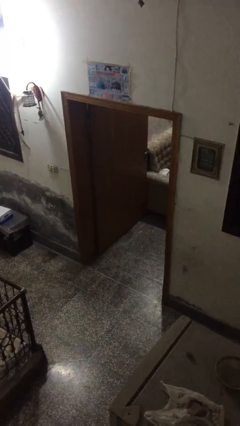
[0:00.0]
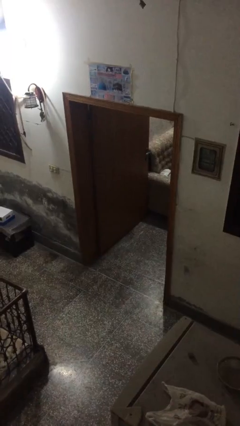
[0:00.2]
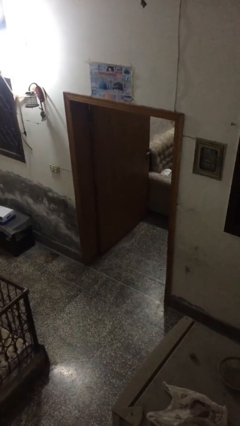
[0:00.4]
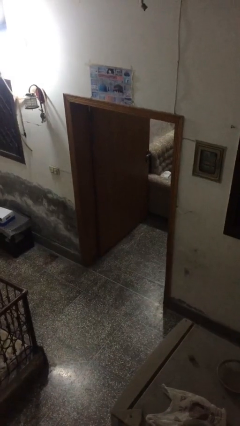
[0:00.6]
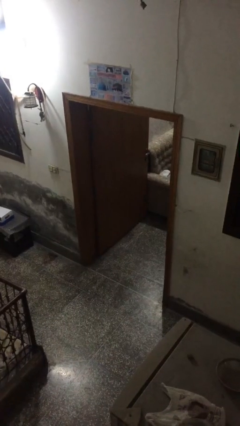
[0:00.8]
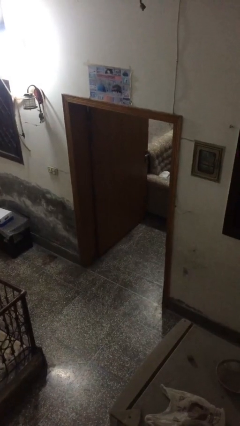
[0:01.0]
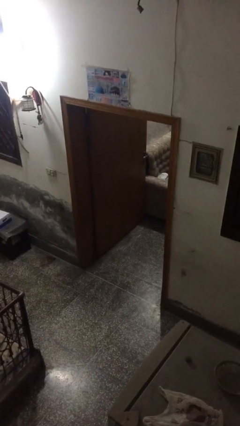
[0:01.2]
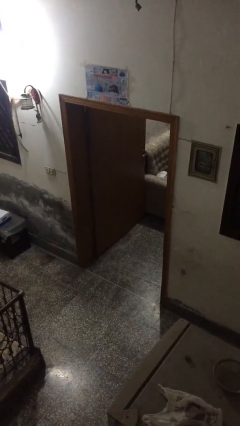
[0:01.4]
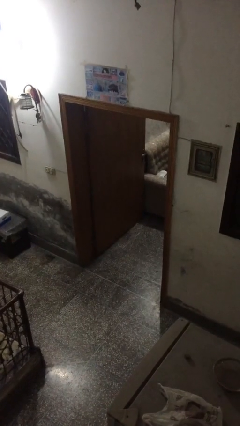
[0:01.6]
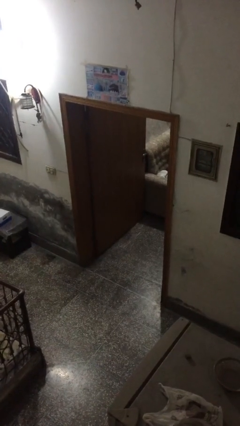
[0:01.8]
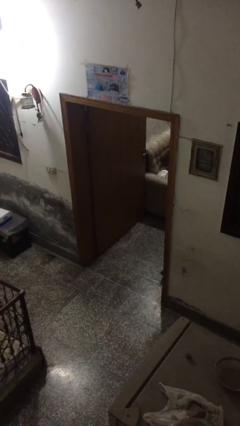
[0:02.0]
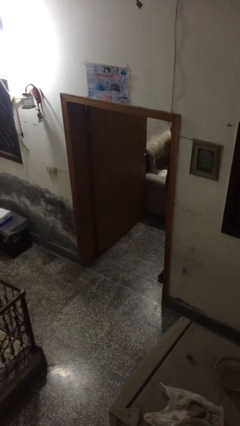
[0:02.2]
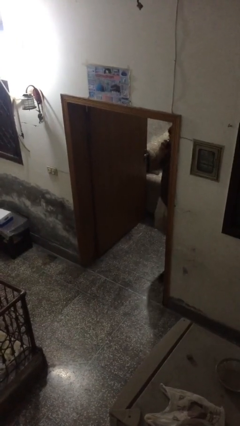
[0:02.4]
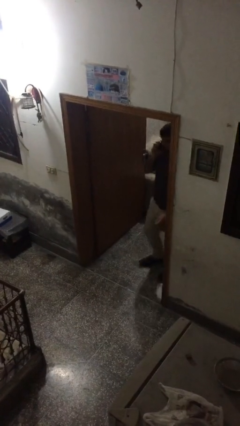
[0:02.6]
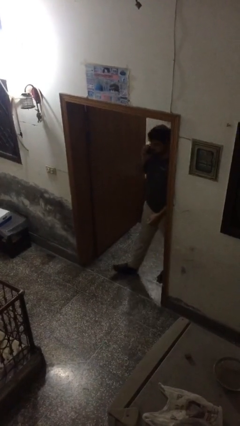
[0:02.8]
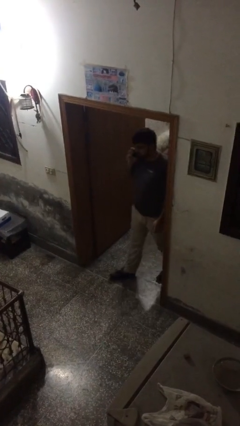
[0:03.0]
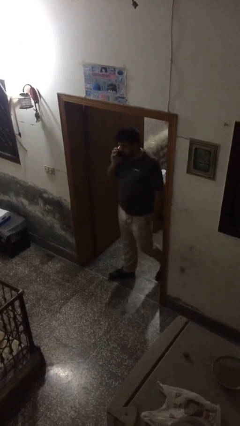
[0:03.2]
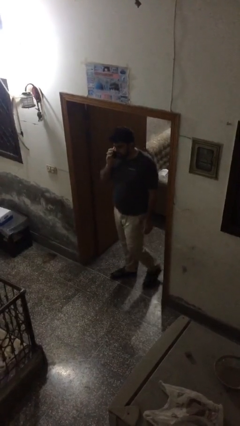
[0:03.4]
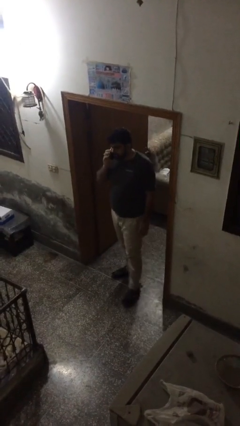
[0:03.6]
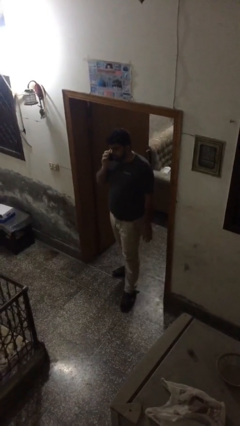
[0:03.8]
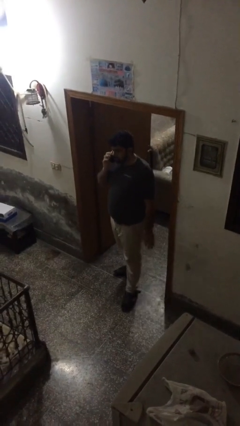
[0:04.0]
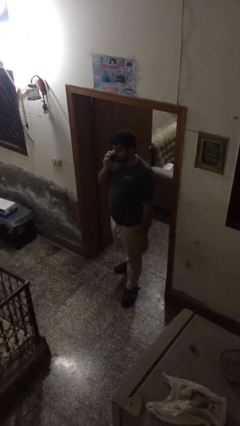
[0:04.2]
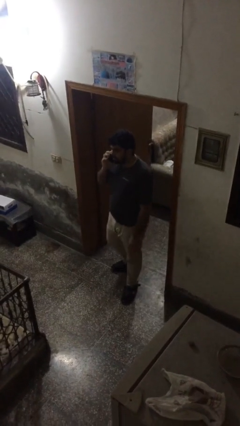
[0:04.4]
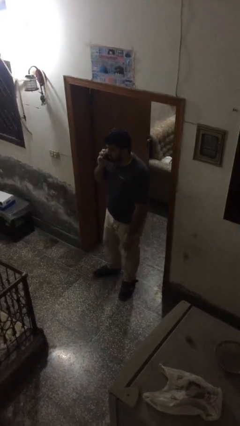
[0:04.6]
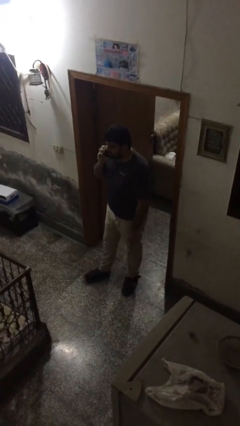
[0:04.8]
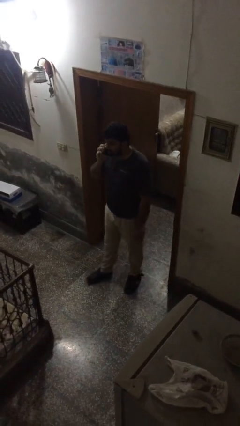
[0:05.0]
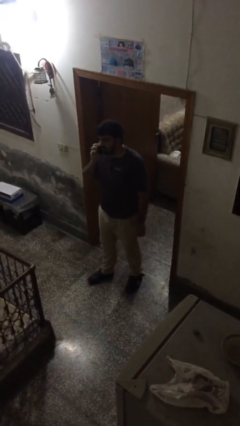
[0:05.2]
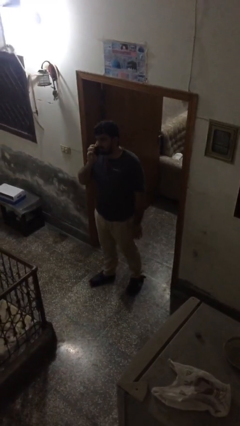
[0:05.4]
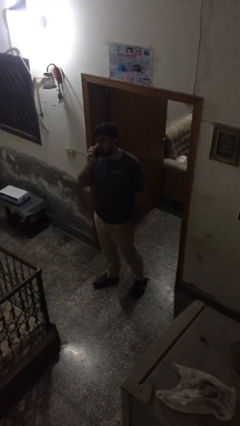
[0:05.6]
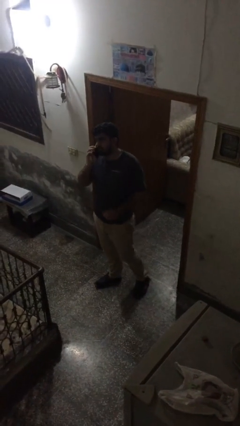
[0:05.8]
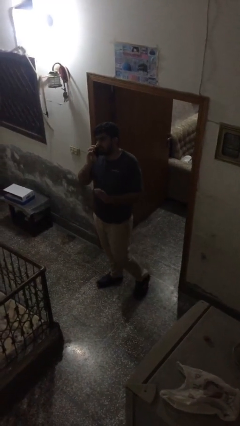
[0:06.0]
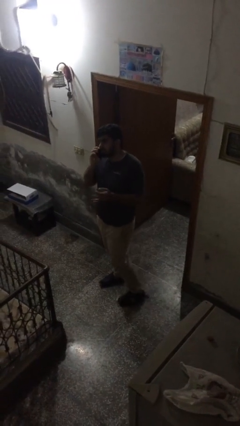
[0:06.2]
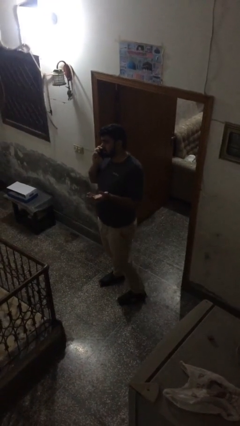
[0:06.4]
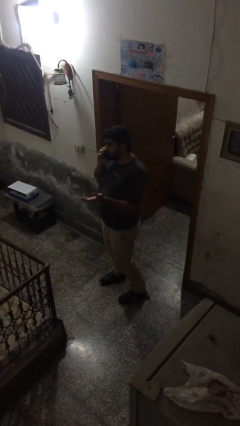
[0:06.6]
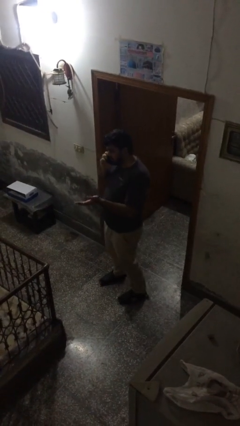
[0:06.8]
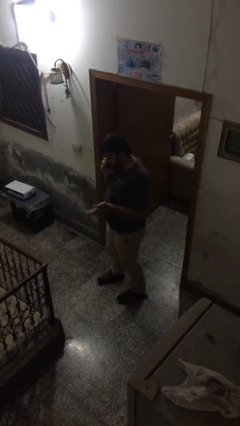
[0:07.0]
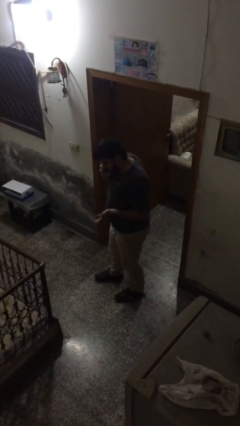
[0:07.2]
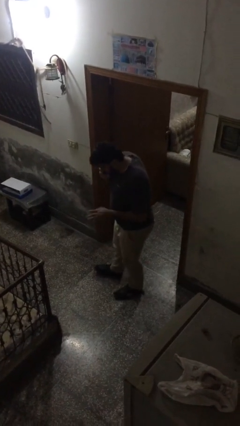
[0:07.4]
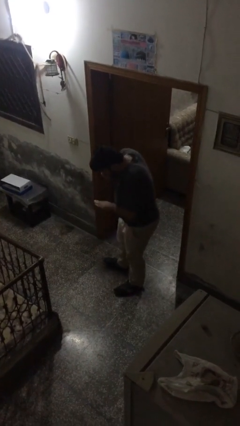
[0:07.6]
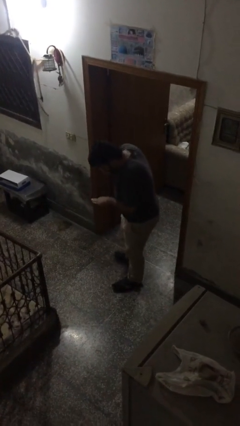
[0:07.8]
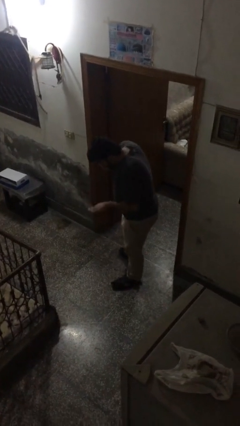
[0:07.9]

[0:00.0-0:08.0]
person enters scene through structure

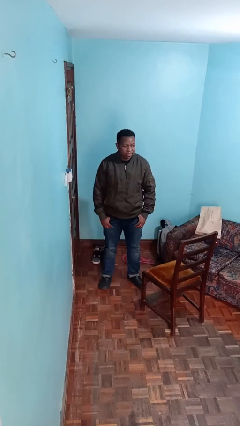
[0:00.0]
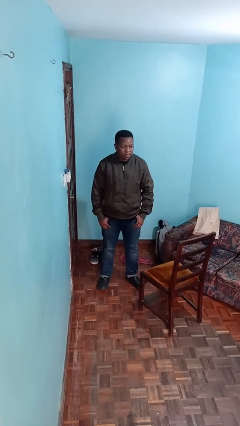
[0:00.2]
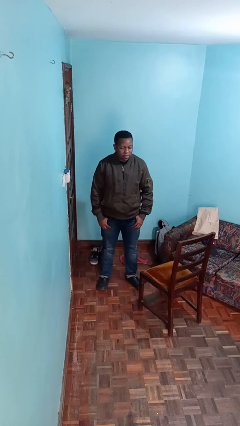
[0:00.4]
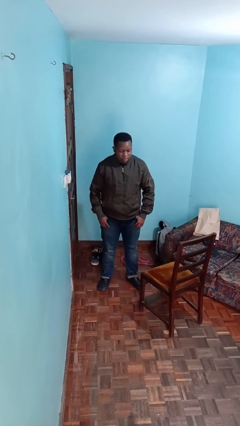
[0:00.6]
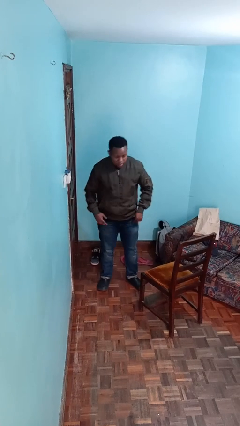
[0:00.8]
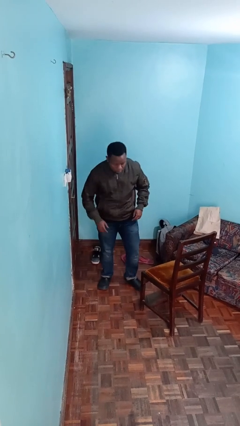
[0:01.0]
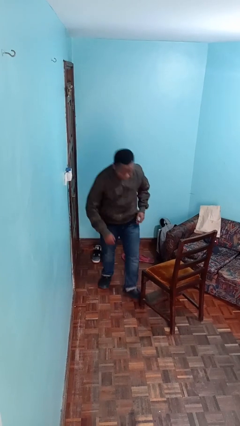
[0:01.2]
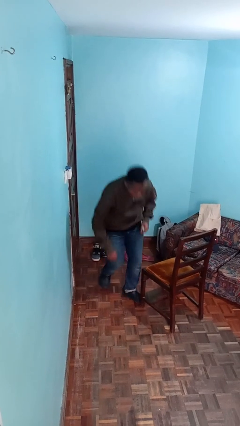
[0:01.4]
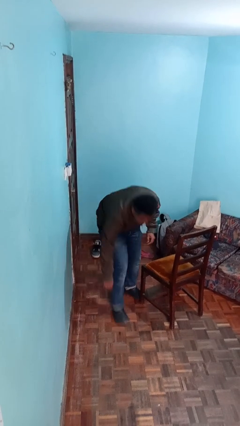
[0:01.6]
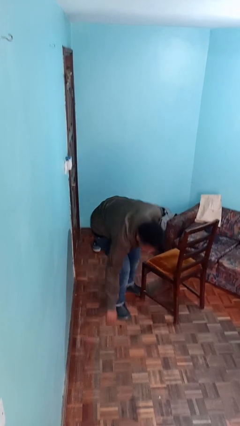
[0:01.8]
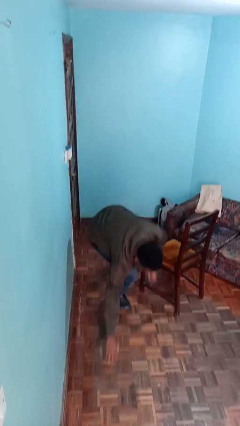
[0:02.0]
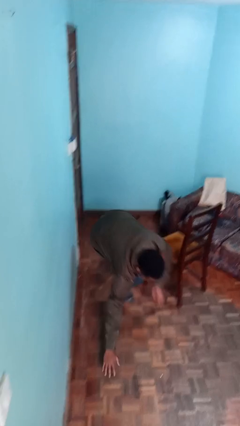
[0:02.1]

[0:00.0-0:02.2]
person trips on object on floor

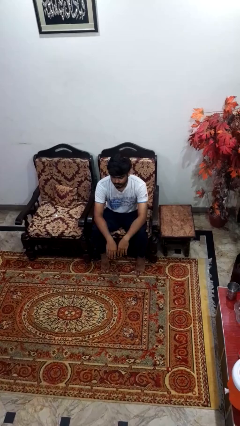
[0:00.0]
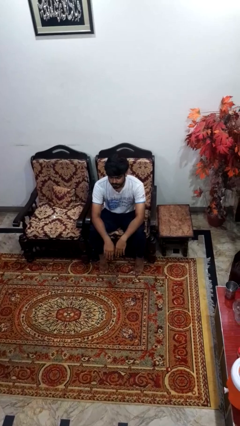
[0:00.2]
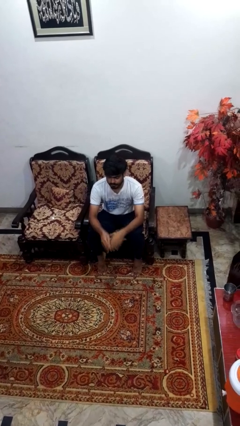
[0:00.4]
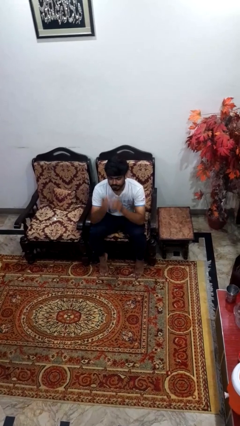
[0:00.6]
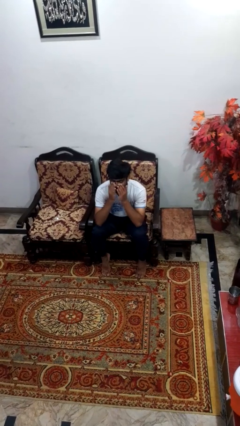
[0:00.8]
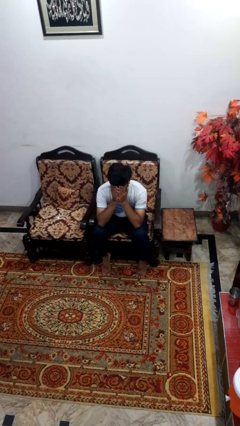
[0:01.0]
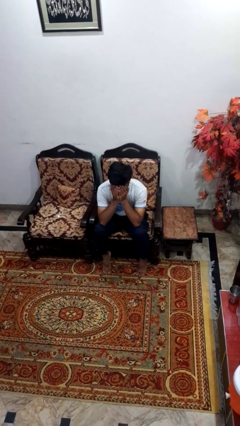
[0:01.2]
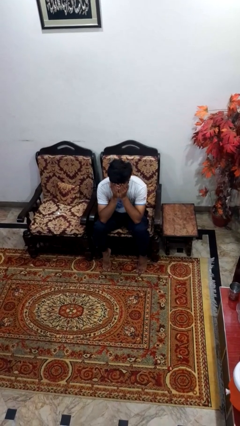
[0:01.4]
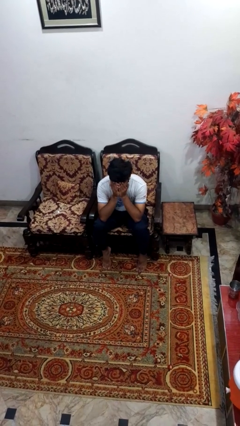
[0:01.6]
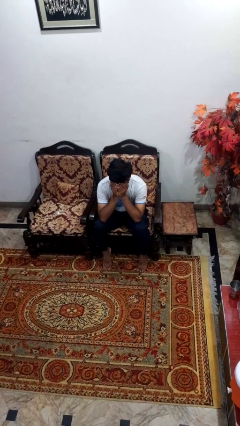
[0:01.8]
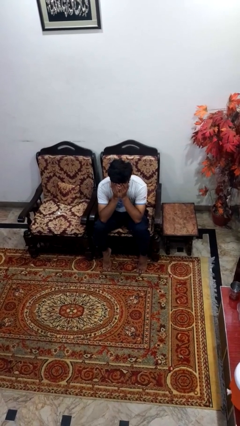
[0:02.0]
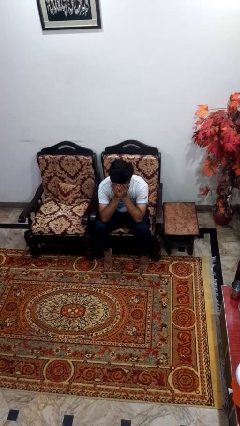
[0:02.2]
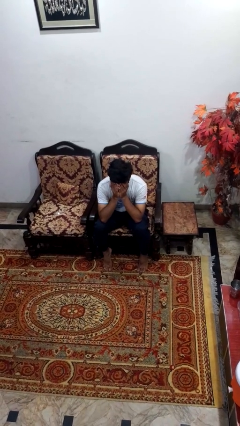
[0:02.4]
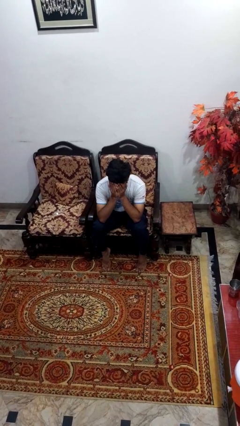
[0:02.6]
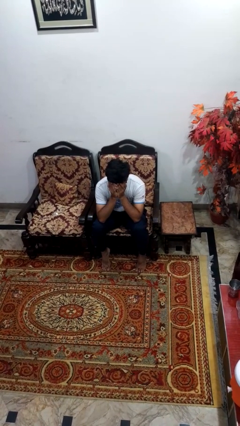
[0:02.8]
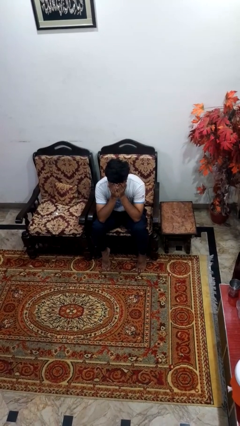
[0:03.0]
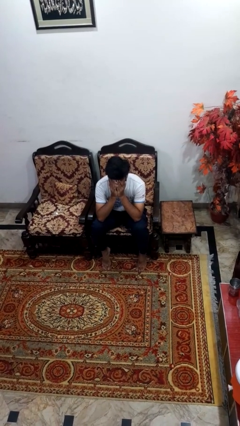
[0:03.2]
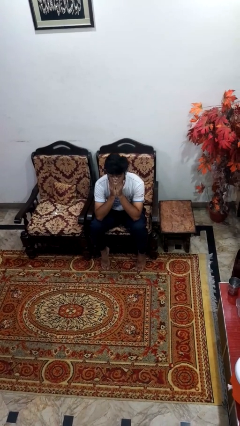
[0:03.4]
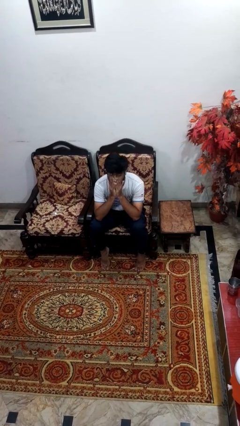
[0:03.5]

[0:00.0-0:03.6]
person covers face with hands

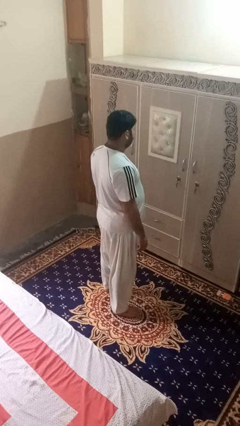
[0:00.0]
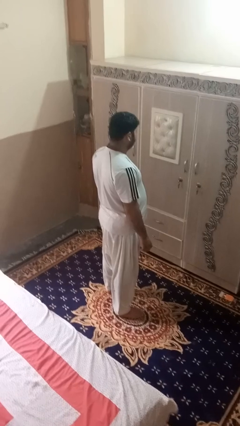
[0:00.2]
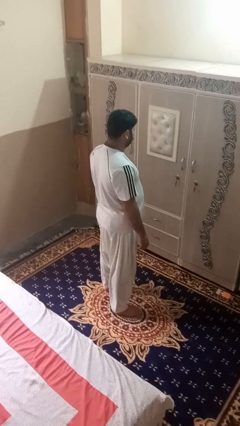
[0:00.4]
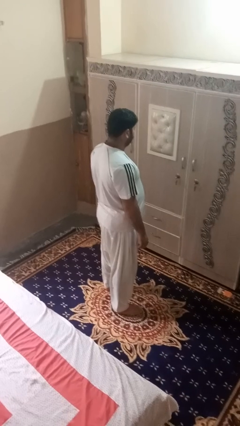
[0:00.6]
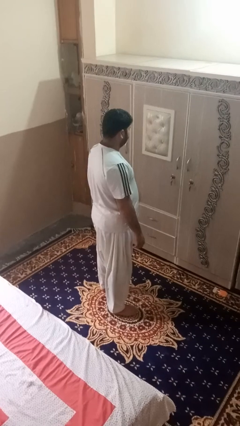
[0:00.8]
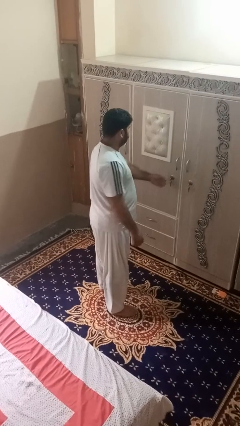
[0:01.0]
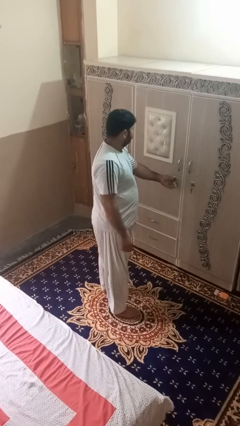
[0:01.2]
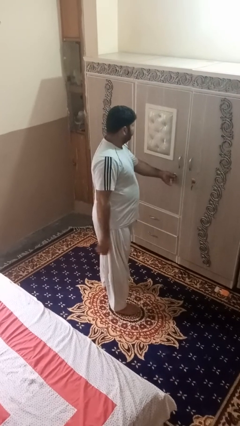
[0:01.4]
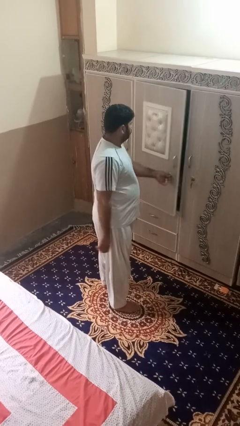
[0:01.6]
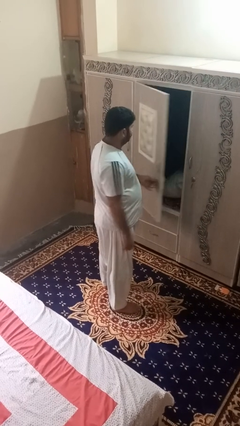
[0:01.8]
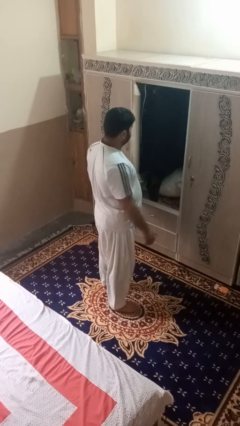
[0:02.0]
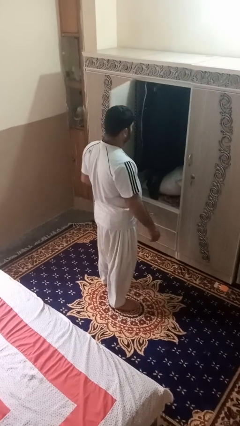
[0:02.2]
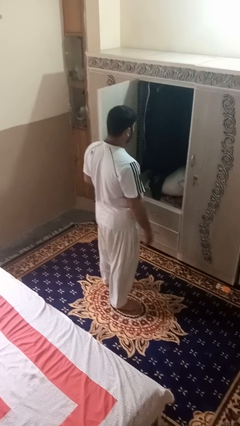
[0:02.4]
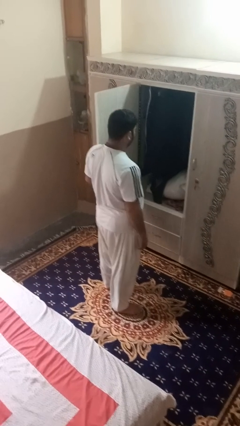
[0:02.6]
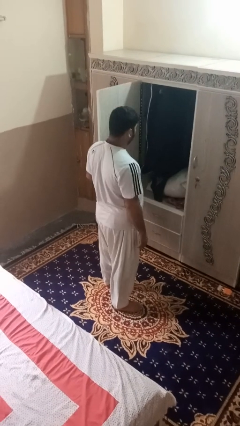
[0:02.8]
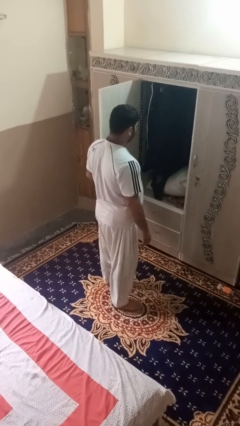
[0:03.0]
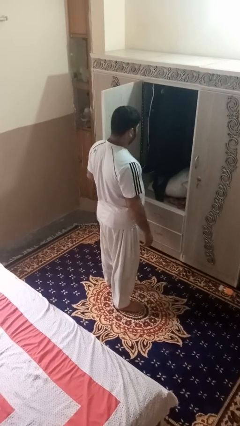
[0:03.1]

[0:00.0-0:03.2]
person opens dresser drawer

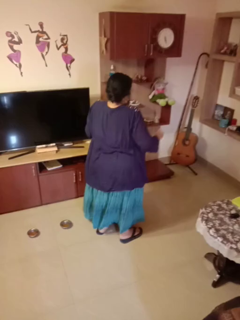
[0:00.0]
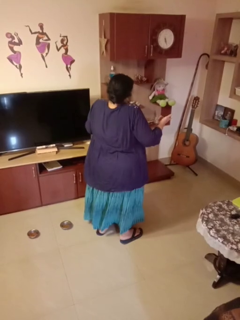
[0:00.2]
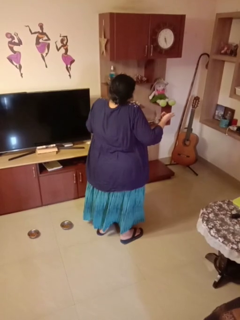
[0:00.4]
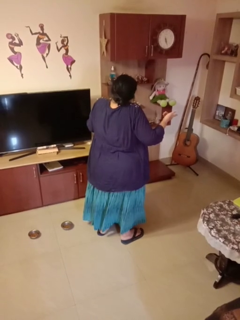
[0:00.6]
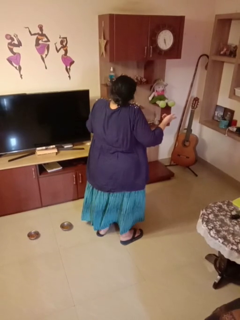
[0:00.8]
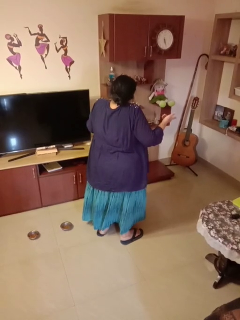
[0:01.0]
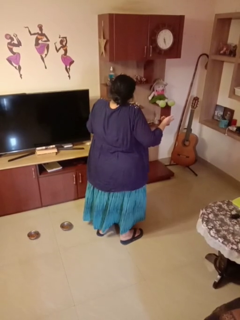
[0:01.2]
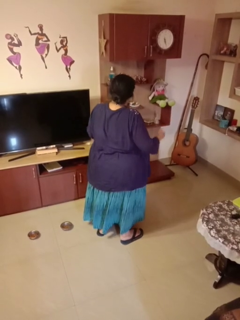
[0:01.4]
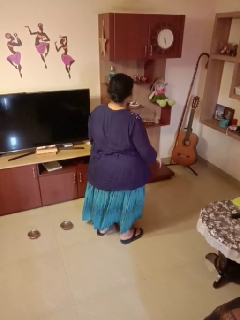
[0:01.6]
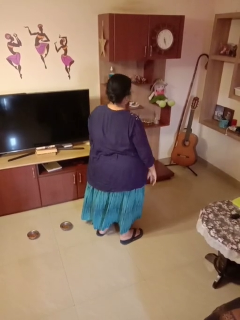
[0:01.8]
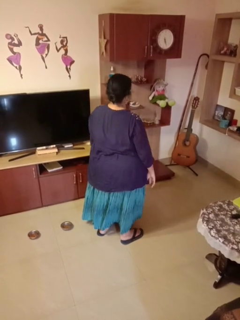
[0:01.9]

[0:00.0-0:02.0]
person shrugs
